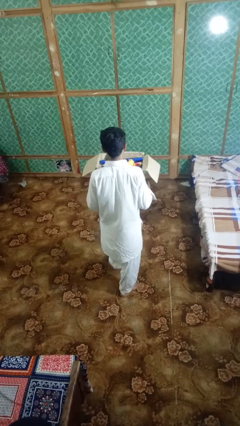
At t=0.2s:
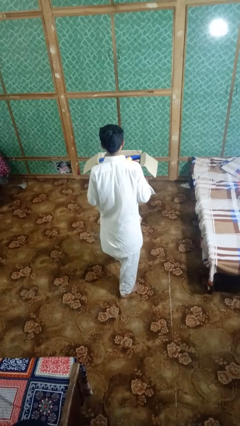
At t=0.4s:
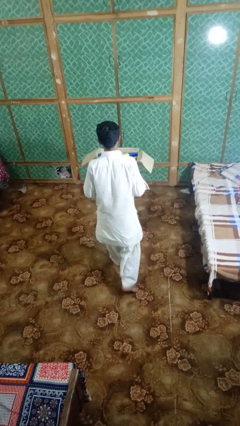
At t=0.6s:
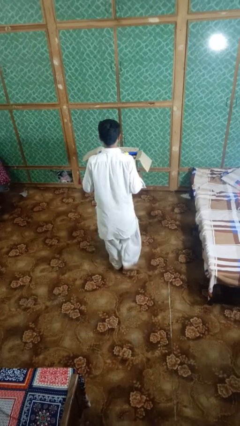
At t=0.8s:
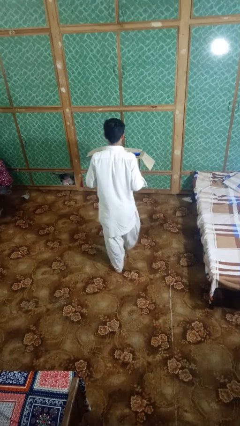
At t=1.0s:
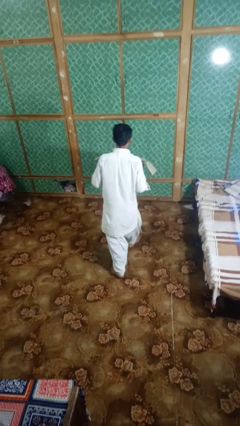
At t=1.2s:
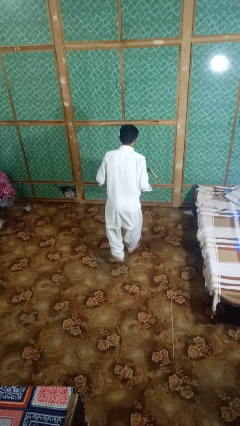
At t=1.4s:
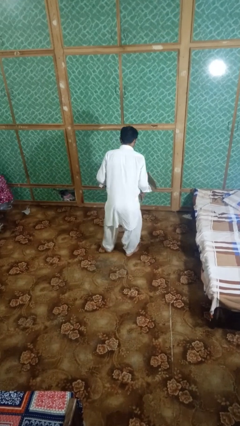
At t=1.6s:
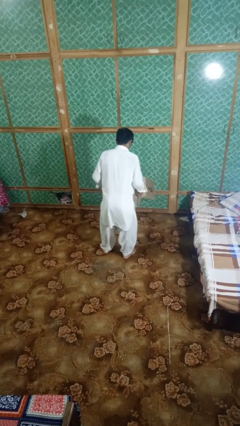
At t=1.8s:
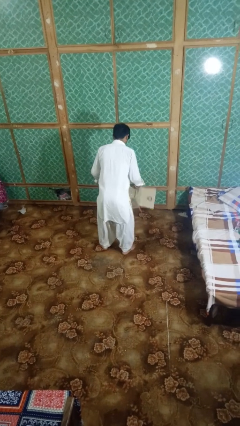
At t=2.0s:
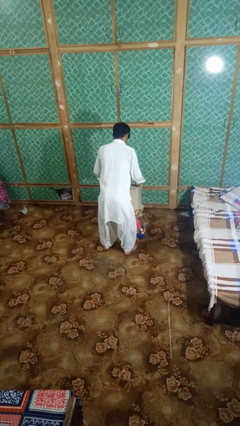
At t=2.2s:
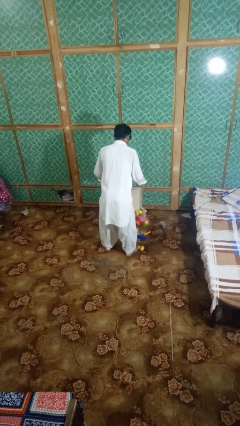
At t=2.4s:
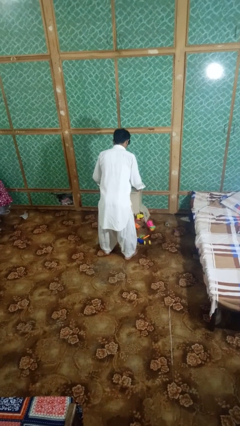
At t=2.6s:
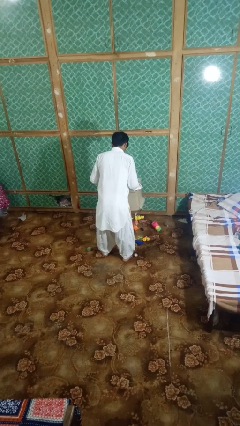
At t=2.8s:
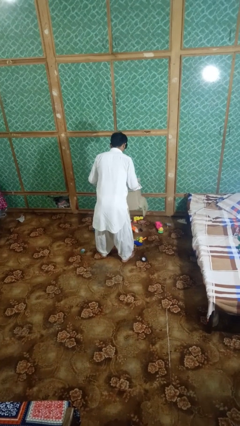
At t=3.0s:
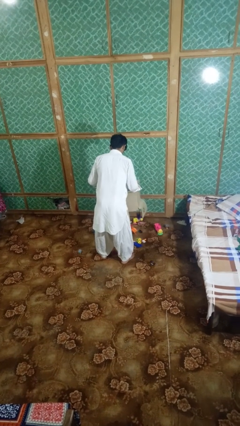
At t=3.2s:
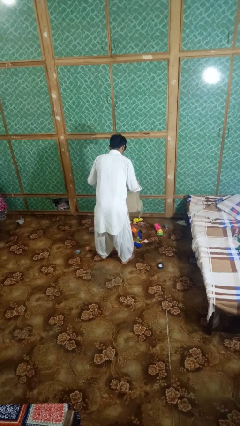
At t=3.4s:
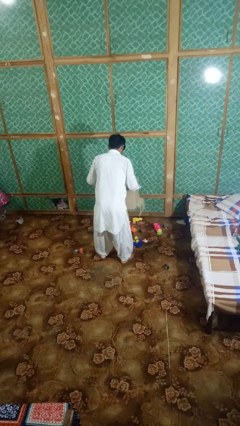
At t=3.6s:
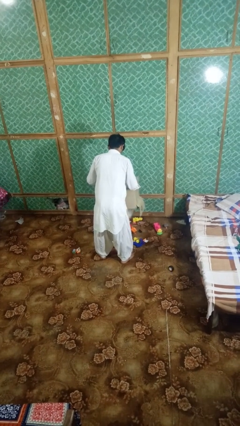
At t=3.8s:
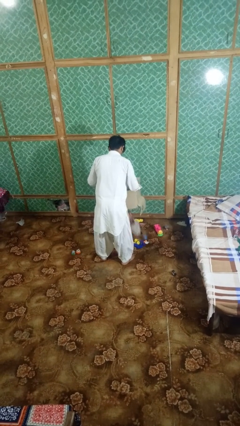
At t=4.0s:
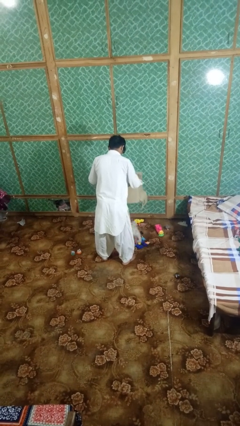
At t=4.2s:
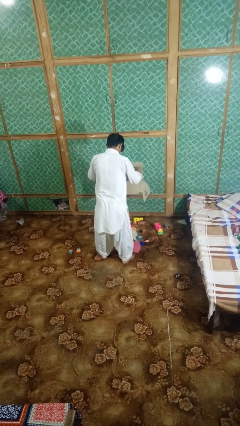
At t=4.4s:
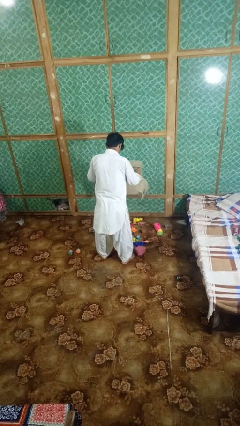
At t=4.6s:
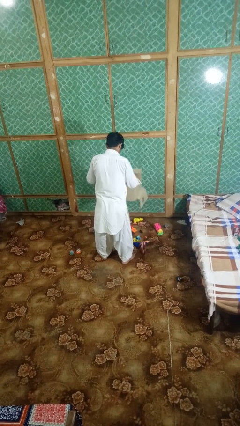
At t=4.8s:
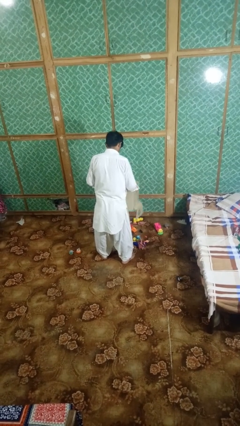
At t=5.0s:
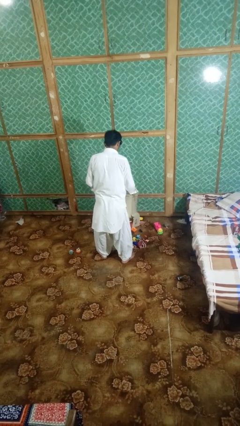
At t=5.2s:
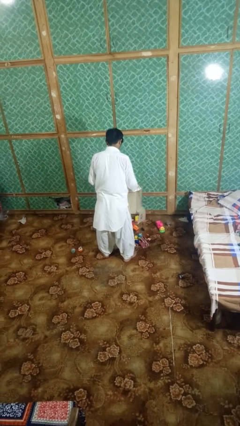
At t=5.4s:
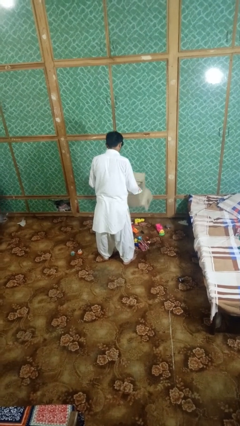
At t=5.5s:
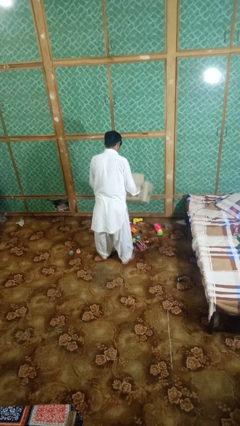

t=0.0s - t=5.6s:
person unloads box onto floor

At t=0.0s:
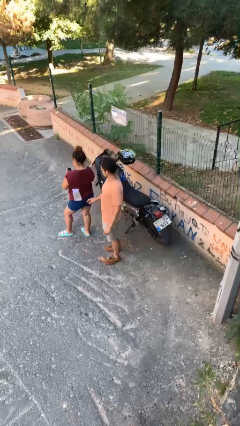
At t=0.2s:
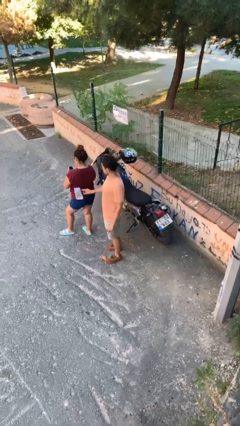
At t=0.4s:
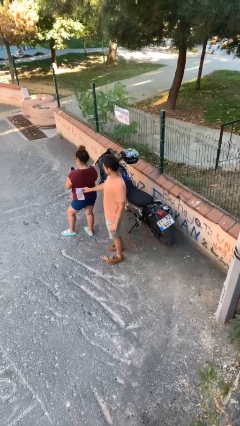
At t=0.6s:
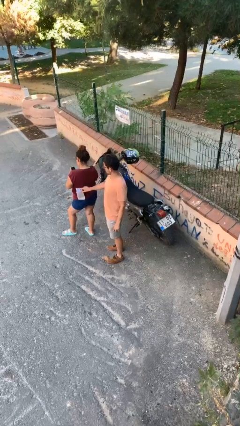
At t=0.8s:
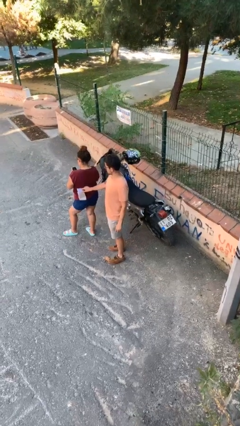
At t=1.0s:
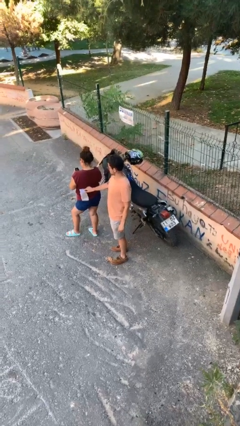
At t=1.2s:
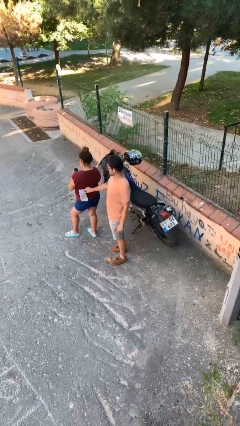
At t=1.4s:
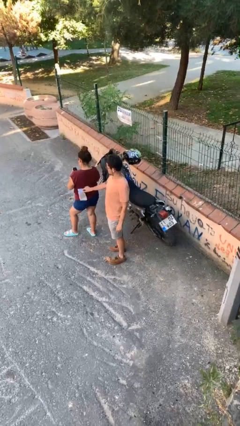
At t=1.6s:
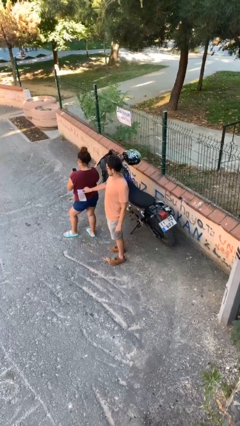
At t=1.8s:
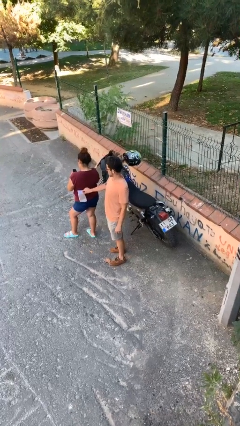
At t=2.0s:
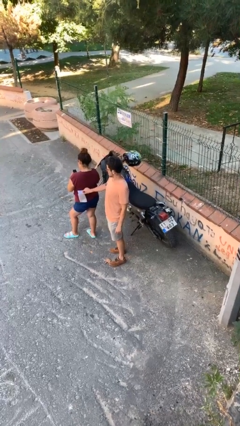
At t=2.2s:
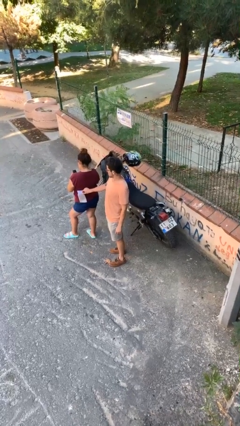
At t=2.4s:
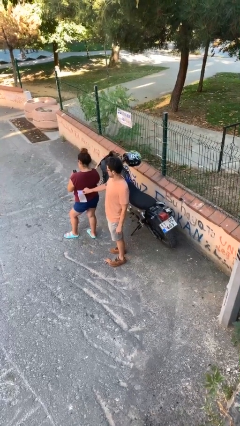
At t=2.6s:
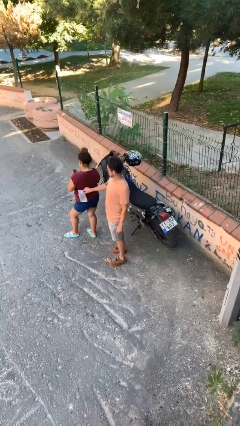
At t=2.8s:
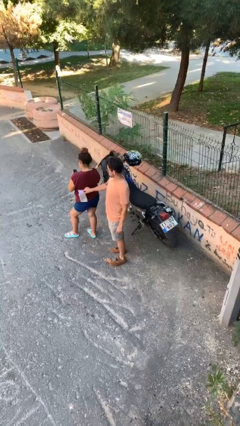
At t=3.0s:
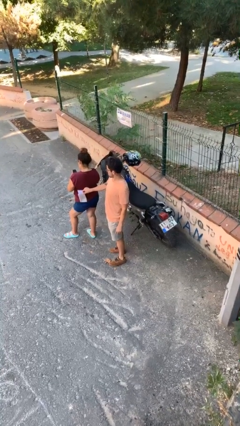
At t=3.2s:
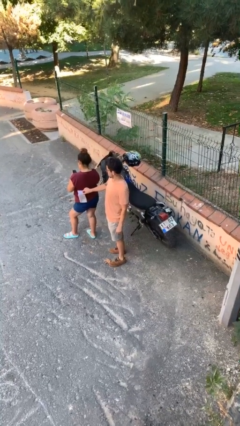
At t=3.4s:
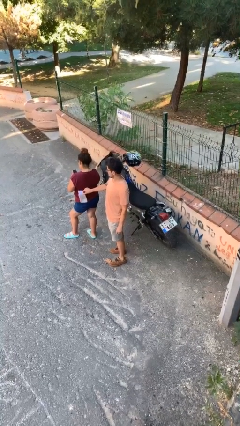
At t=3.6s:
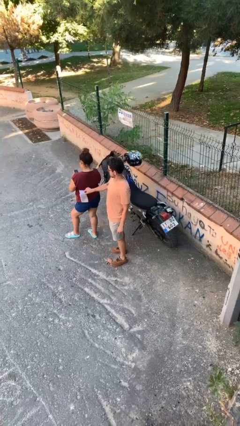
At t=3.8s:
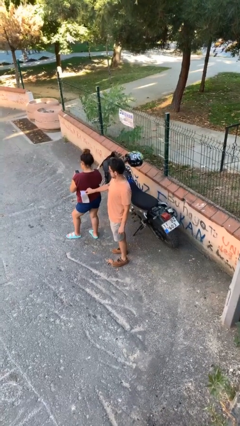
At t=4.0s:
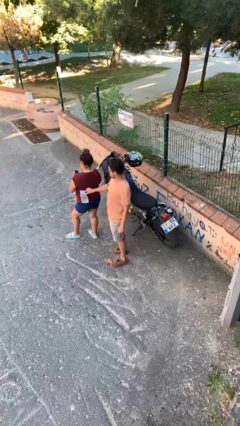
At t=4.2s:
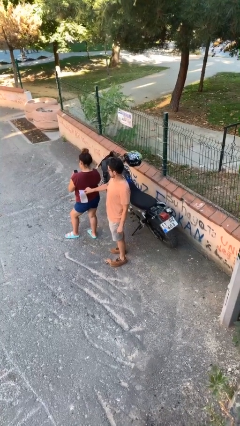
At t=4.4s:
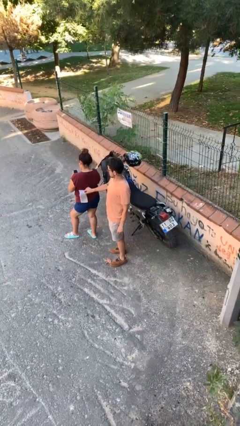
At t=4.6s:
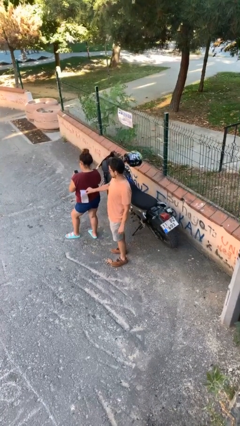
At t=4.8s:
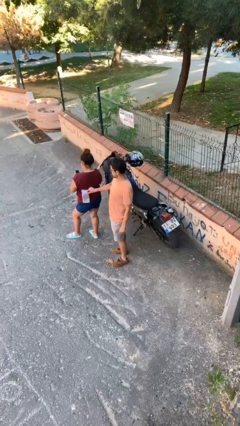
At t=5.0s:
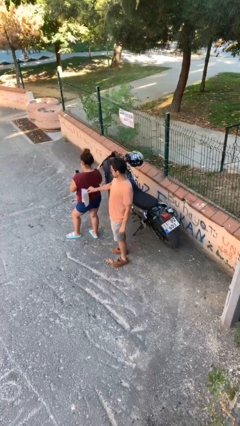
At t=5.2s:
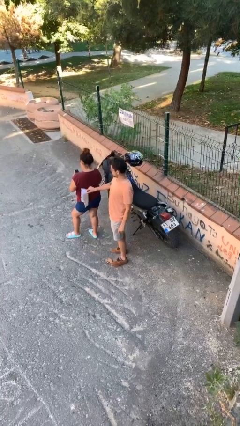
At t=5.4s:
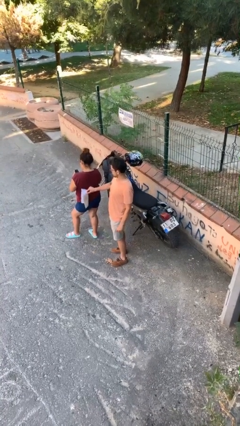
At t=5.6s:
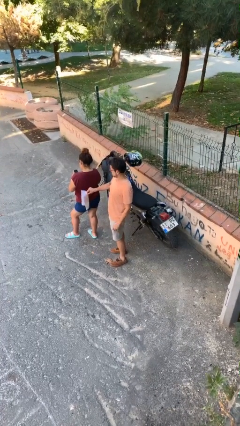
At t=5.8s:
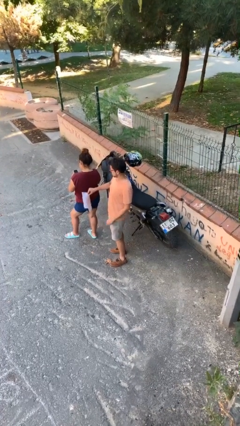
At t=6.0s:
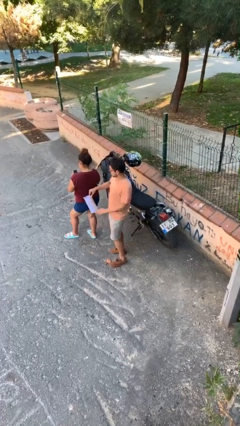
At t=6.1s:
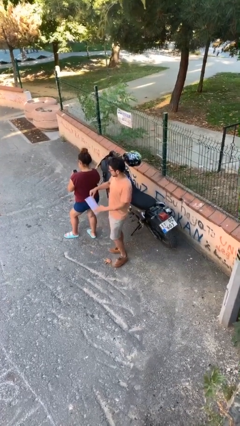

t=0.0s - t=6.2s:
person steals object from person

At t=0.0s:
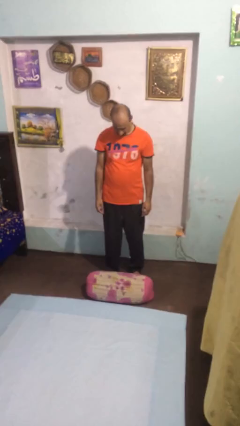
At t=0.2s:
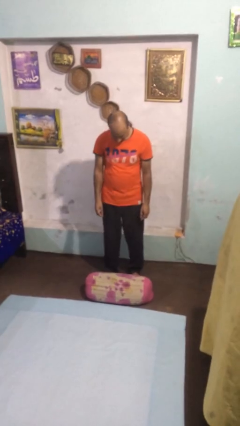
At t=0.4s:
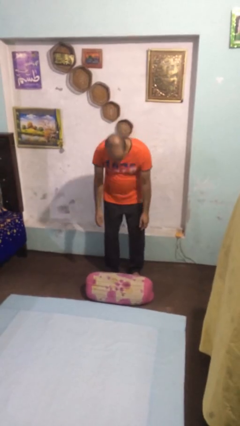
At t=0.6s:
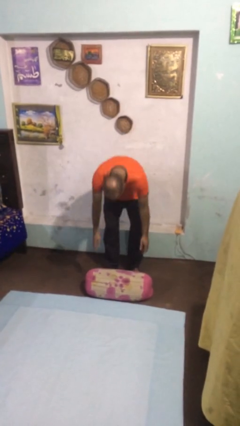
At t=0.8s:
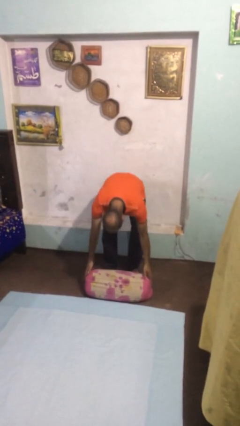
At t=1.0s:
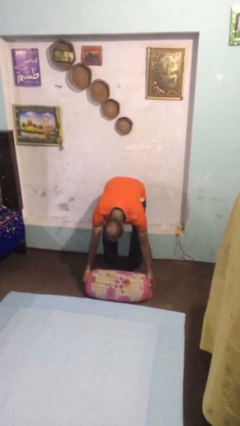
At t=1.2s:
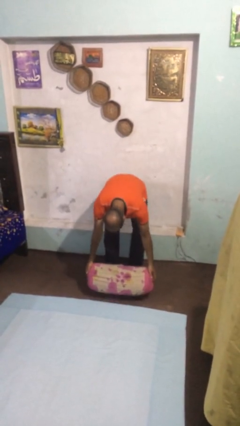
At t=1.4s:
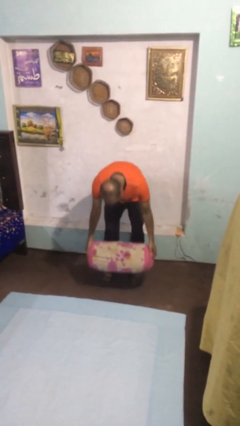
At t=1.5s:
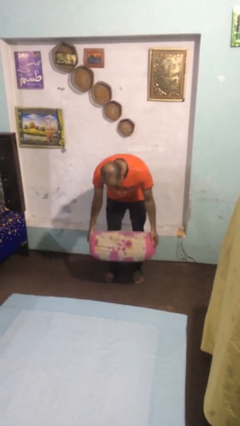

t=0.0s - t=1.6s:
person picks up object from floor

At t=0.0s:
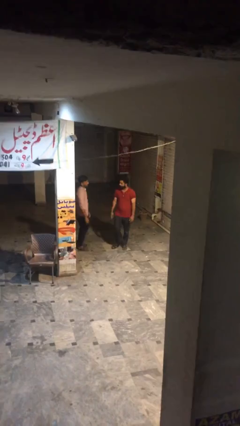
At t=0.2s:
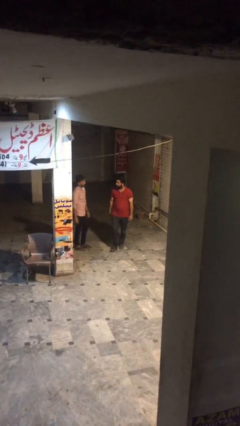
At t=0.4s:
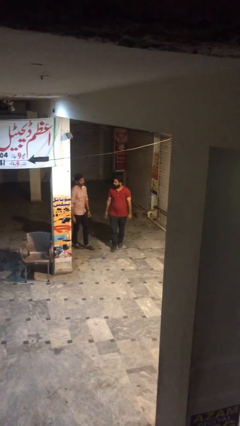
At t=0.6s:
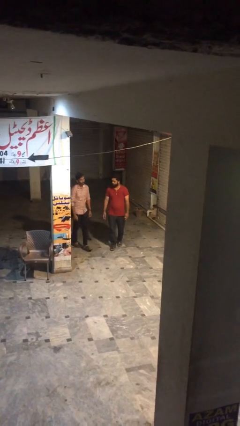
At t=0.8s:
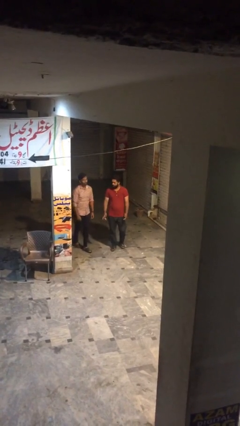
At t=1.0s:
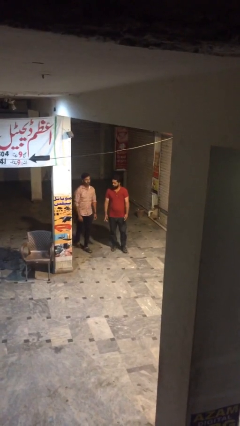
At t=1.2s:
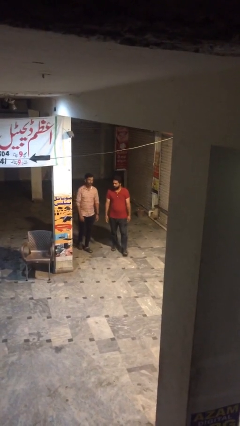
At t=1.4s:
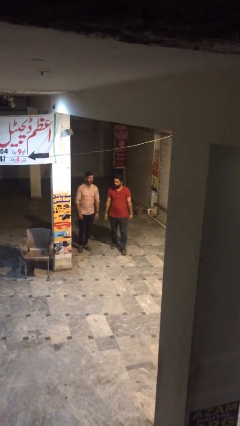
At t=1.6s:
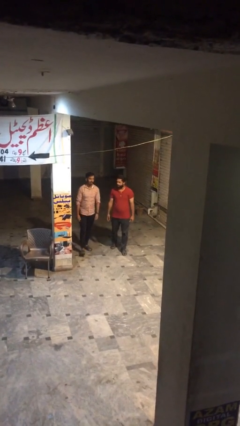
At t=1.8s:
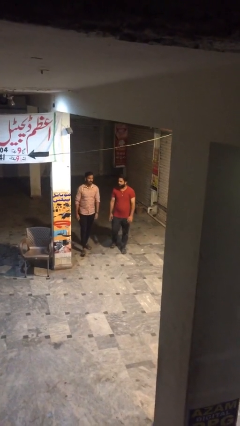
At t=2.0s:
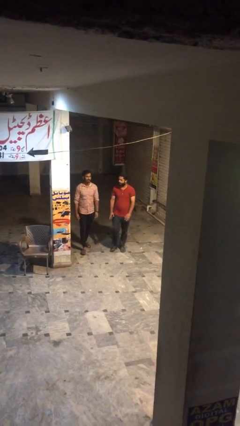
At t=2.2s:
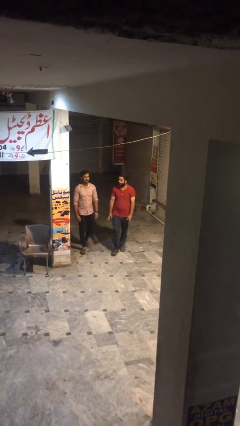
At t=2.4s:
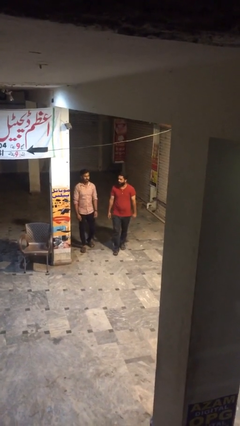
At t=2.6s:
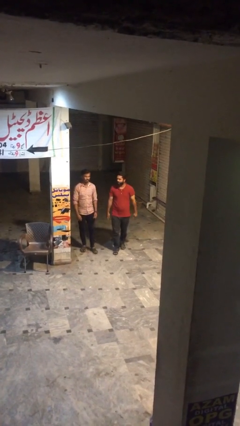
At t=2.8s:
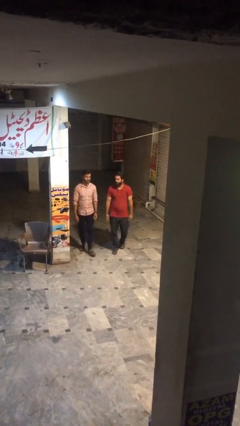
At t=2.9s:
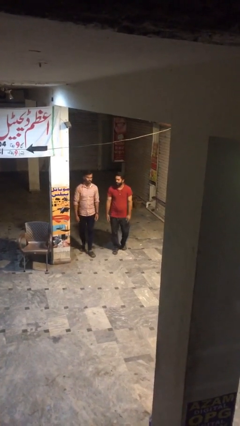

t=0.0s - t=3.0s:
person talks to person

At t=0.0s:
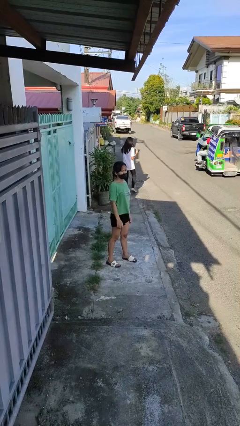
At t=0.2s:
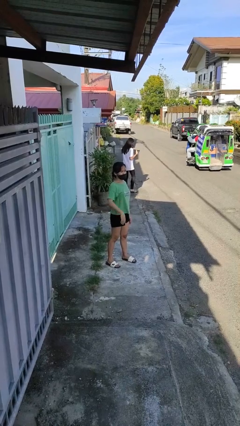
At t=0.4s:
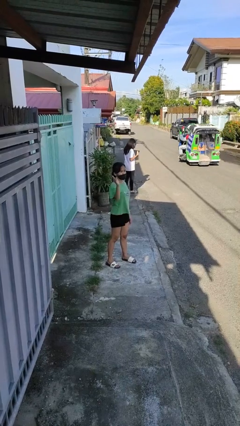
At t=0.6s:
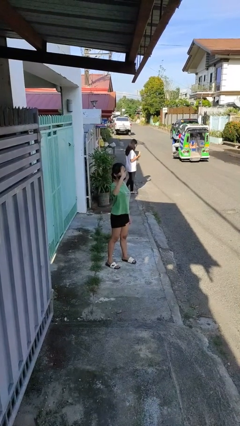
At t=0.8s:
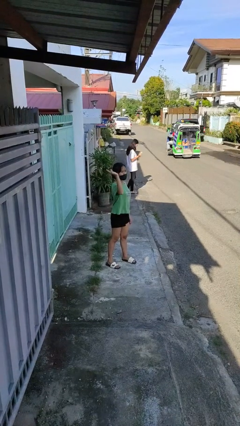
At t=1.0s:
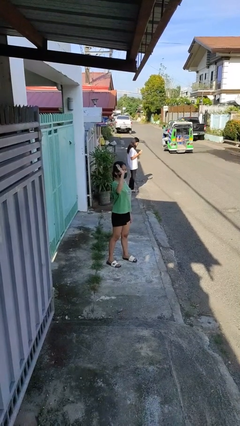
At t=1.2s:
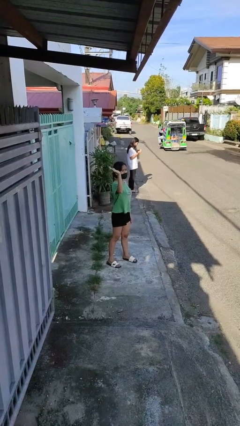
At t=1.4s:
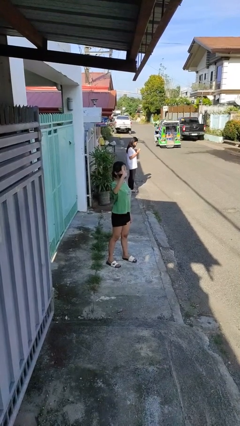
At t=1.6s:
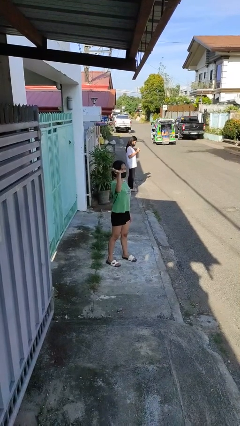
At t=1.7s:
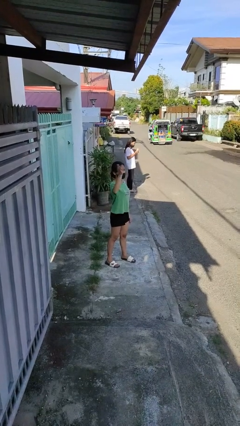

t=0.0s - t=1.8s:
person waves at person
